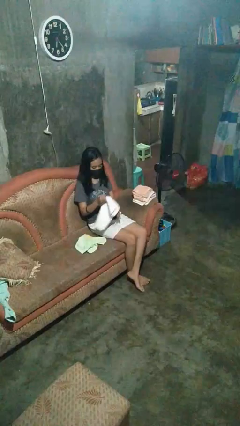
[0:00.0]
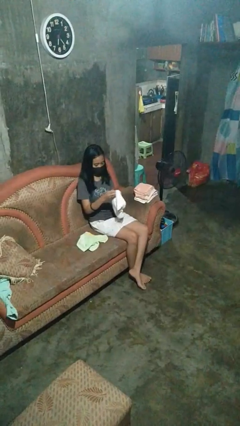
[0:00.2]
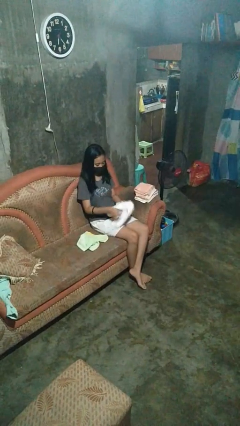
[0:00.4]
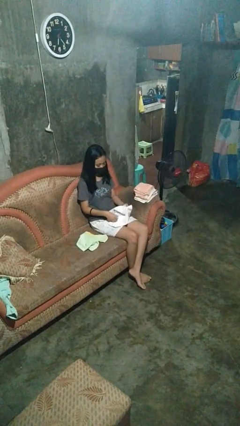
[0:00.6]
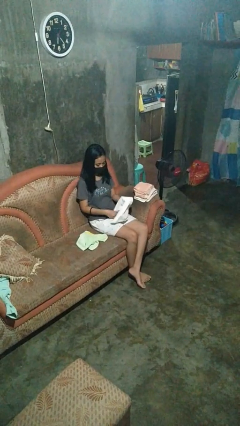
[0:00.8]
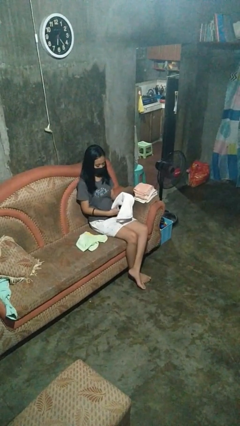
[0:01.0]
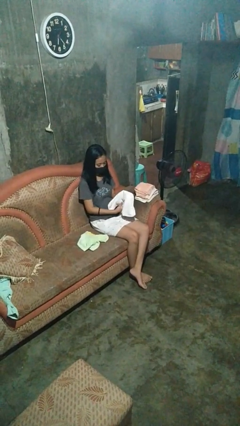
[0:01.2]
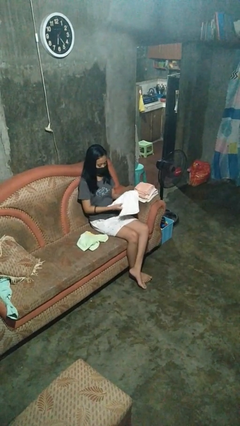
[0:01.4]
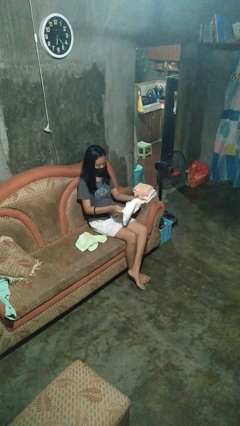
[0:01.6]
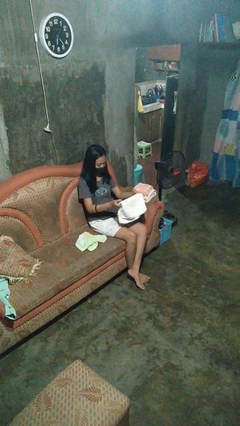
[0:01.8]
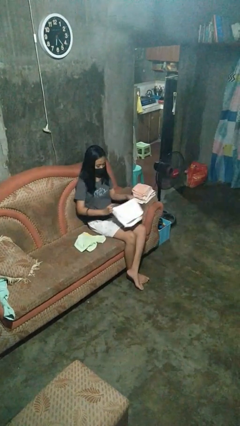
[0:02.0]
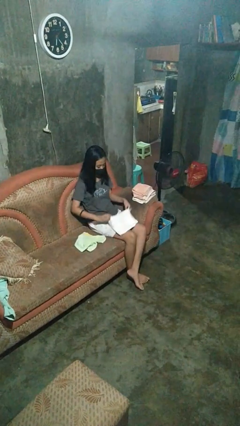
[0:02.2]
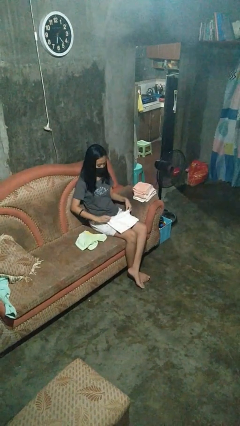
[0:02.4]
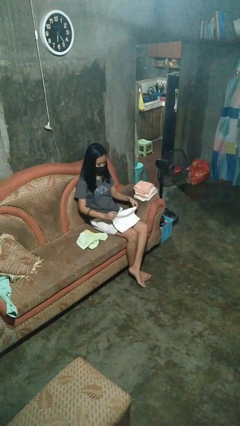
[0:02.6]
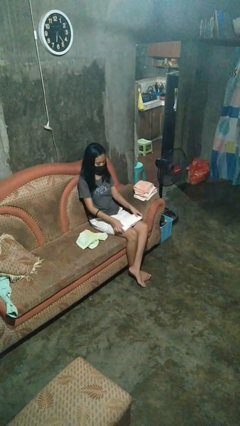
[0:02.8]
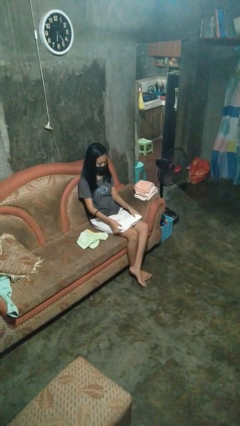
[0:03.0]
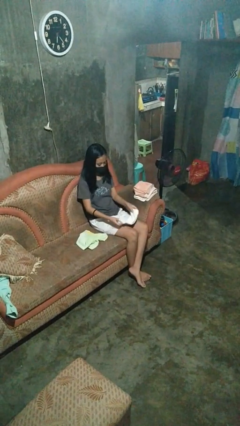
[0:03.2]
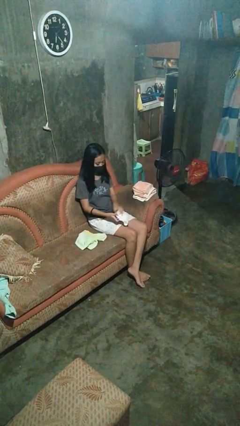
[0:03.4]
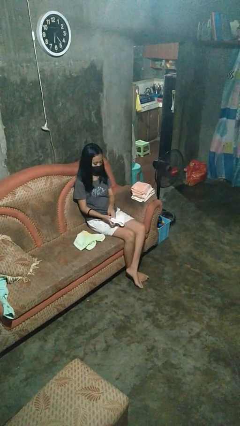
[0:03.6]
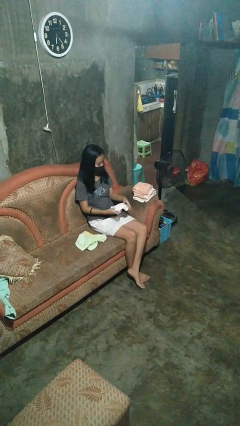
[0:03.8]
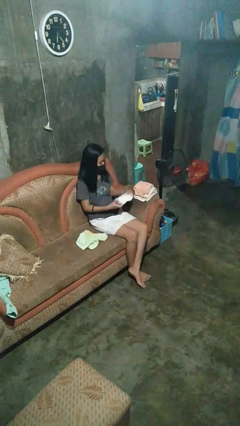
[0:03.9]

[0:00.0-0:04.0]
person folds towel

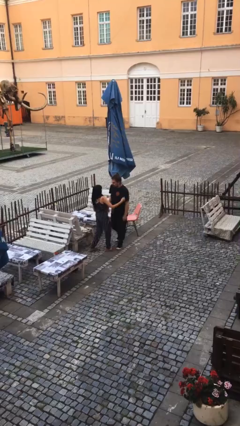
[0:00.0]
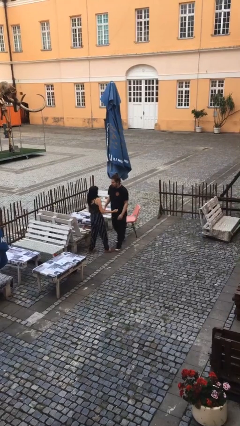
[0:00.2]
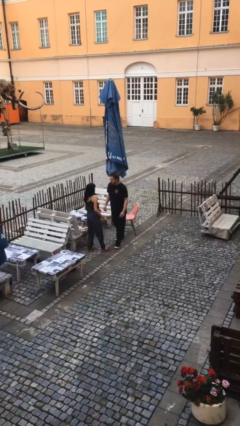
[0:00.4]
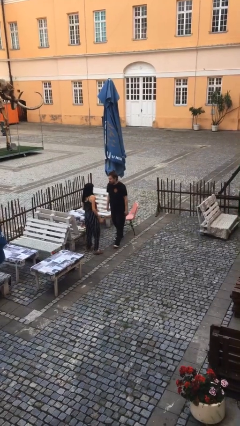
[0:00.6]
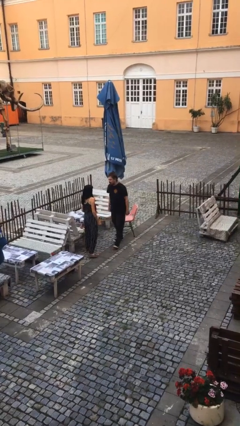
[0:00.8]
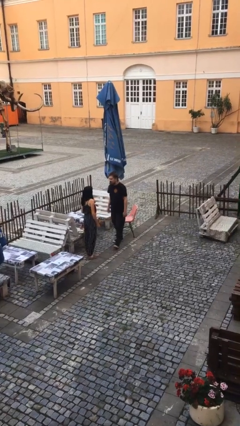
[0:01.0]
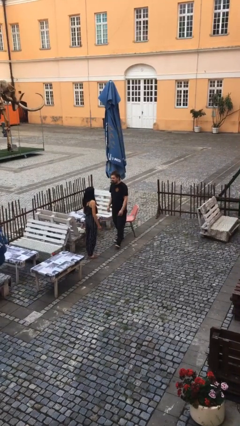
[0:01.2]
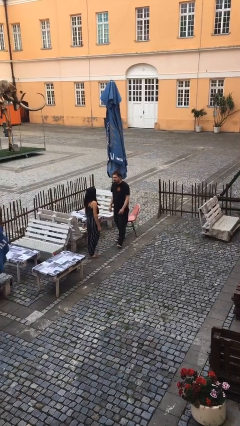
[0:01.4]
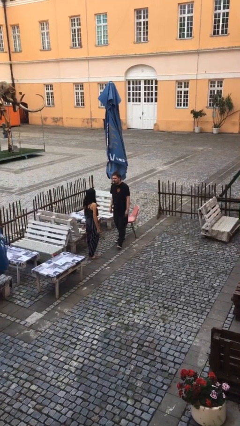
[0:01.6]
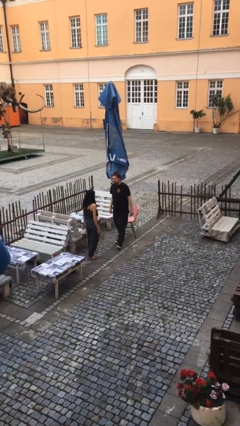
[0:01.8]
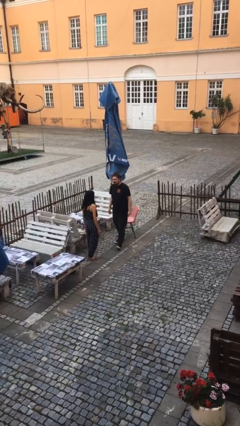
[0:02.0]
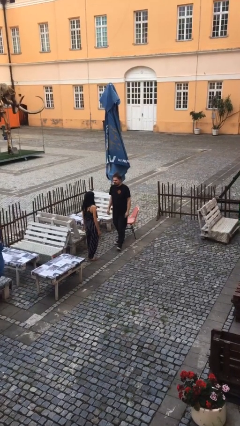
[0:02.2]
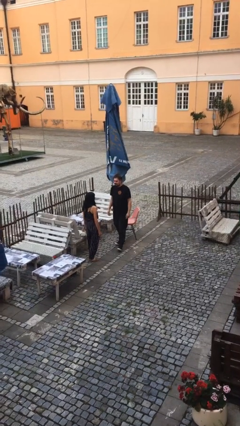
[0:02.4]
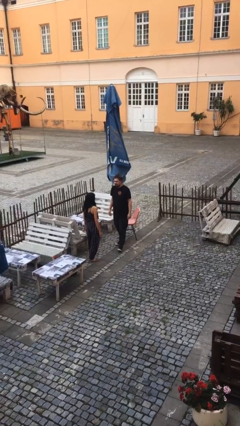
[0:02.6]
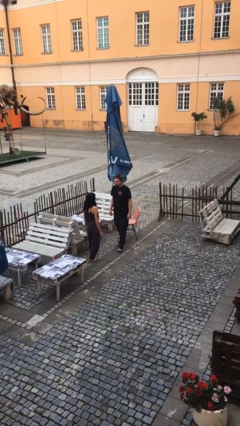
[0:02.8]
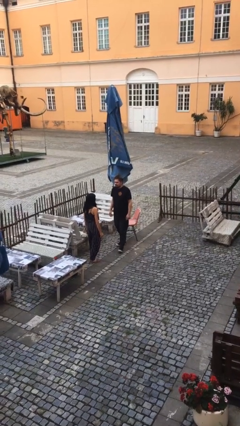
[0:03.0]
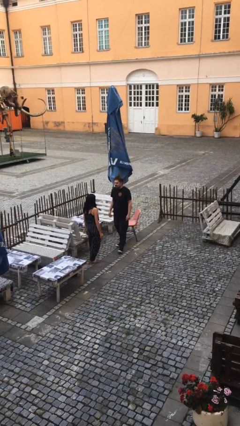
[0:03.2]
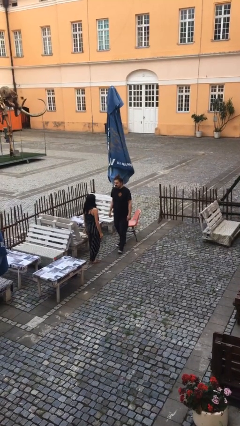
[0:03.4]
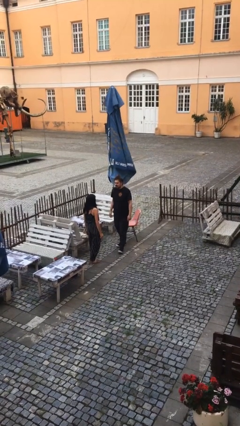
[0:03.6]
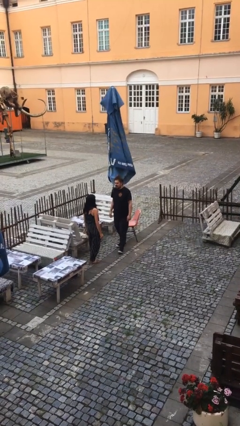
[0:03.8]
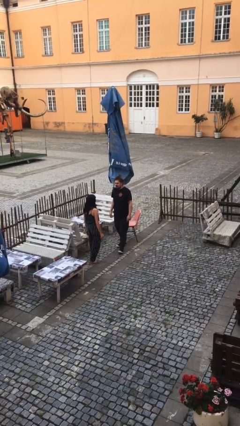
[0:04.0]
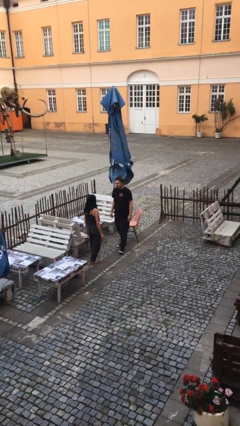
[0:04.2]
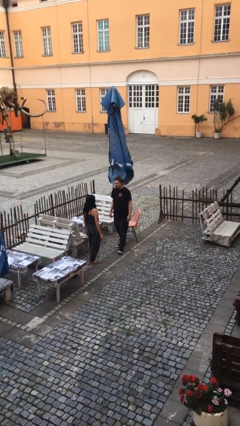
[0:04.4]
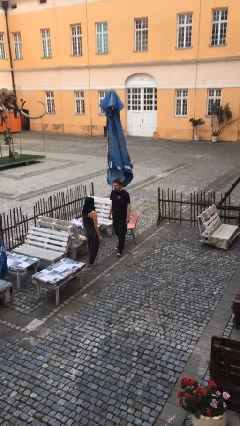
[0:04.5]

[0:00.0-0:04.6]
person talks to person

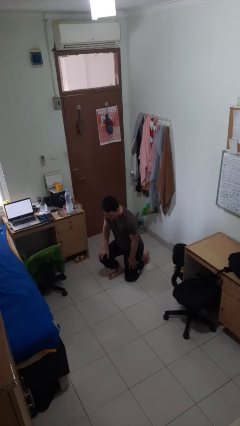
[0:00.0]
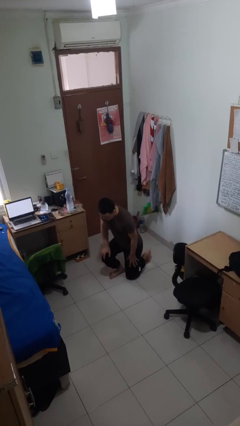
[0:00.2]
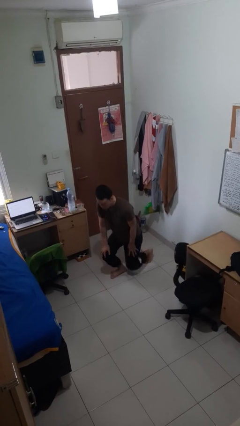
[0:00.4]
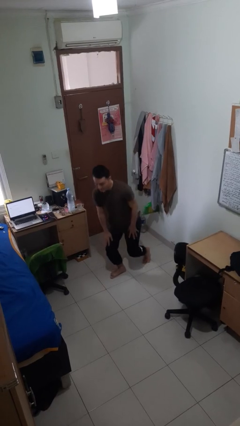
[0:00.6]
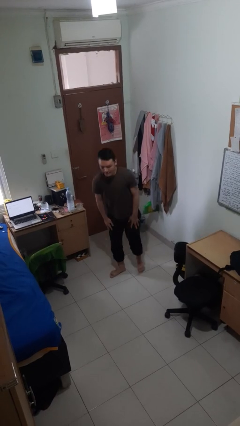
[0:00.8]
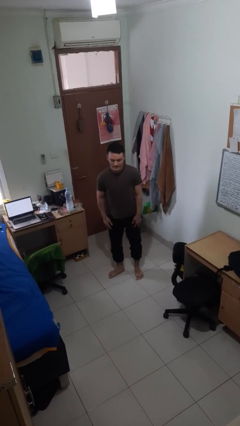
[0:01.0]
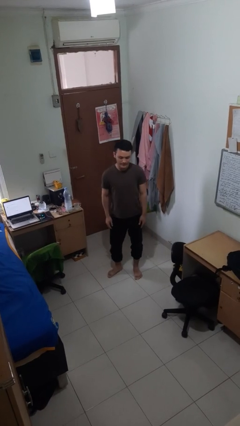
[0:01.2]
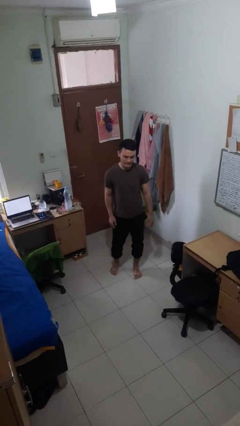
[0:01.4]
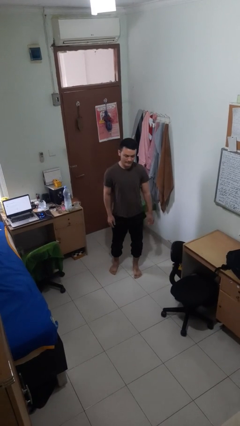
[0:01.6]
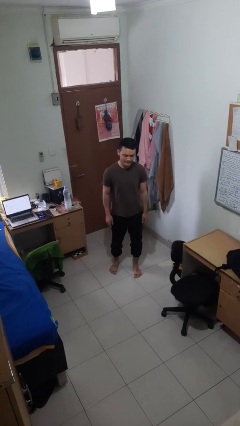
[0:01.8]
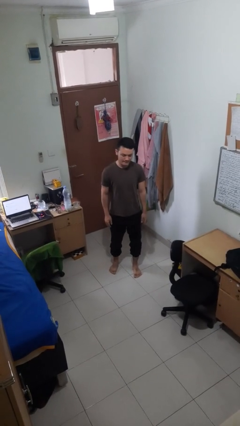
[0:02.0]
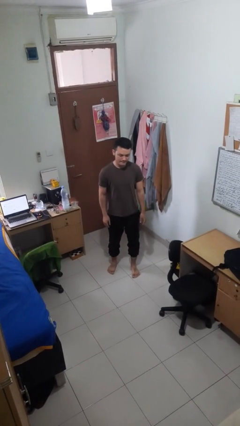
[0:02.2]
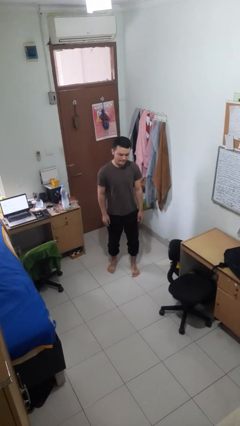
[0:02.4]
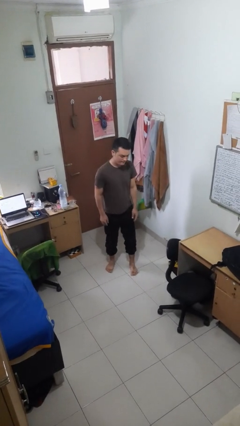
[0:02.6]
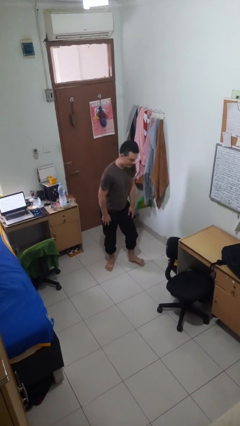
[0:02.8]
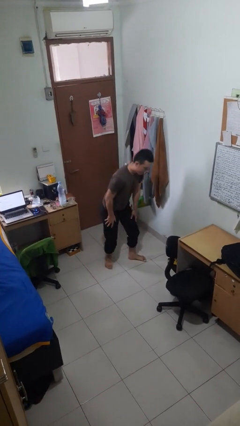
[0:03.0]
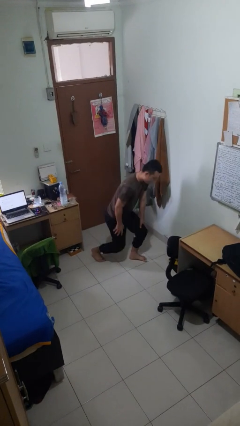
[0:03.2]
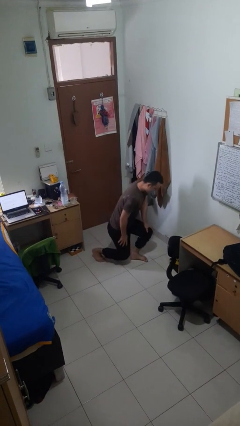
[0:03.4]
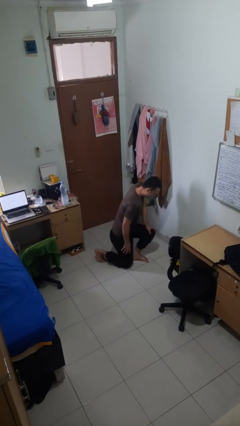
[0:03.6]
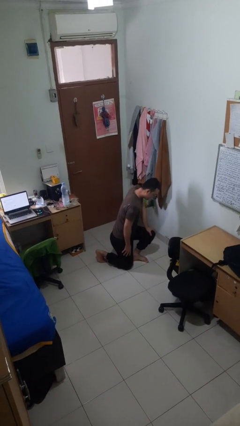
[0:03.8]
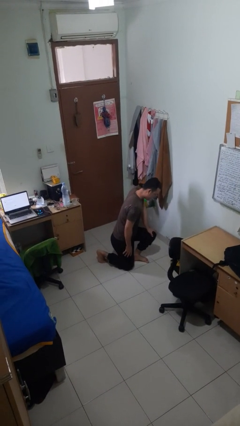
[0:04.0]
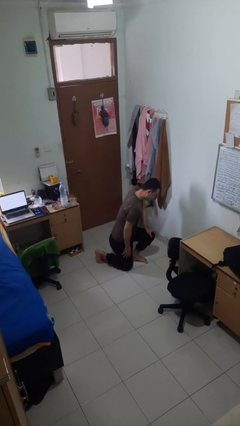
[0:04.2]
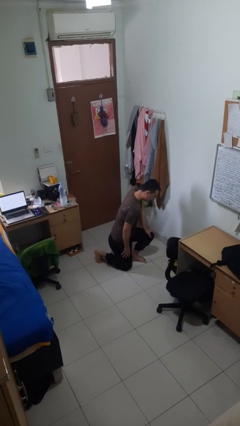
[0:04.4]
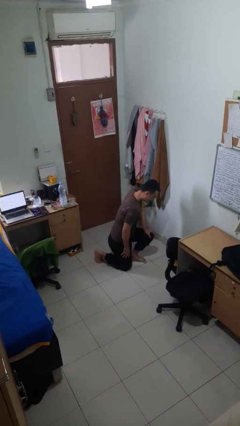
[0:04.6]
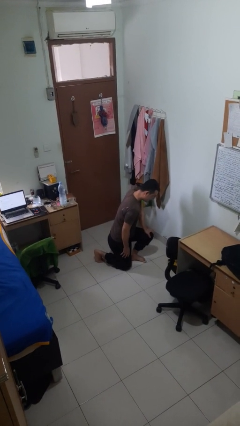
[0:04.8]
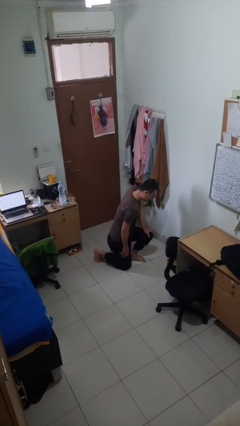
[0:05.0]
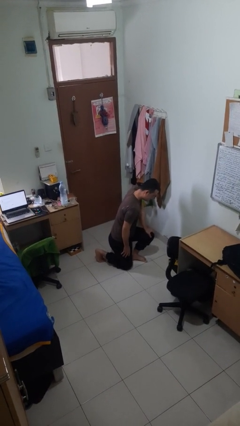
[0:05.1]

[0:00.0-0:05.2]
person stands up from floor

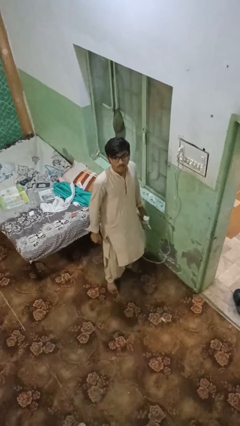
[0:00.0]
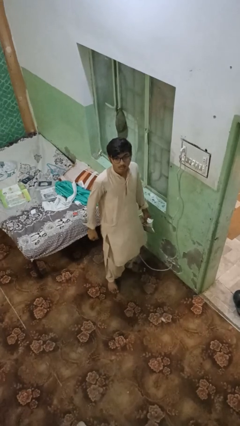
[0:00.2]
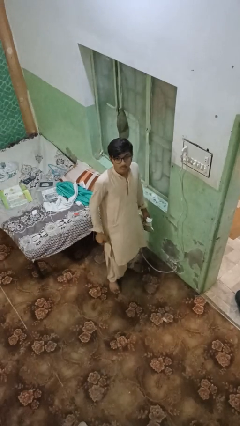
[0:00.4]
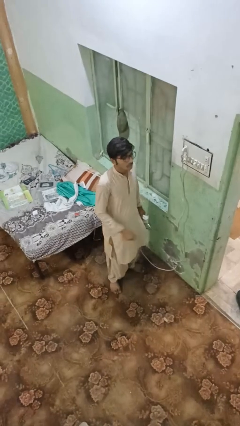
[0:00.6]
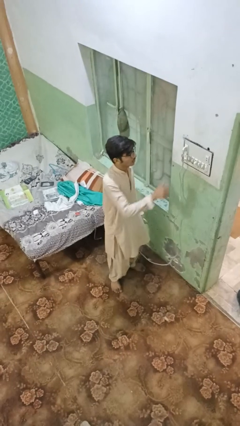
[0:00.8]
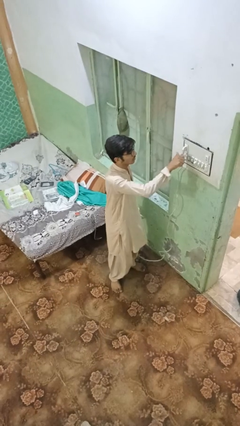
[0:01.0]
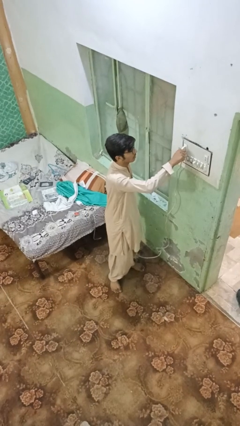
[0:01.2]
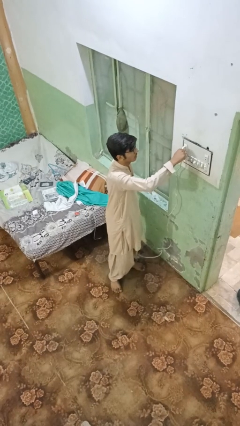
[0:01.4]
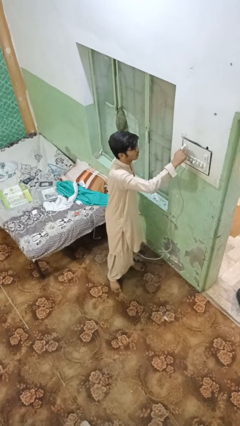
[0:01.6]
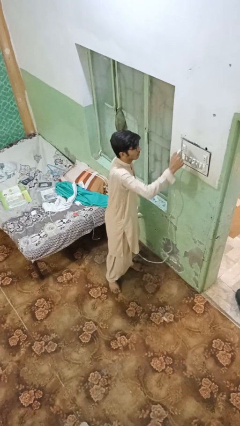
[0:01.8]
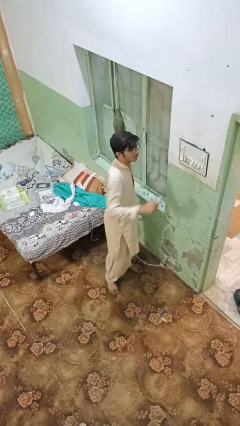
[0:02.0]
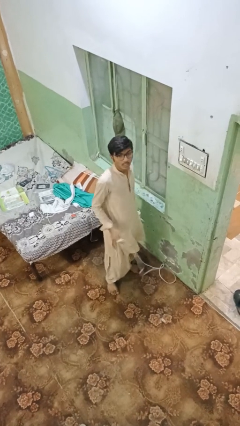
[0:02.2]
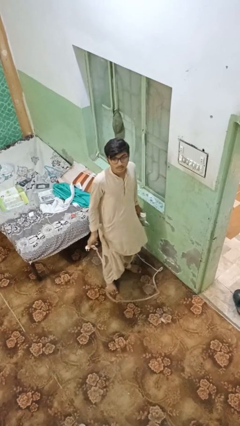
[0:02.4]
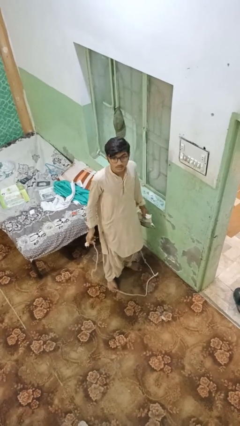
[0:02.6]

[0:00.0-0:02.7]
person unplugs from electrical socket

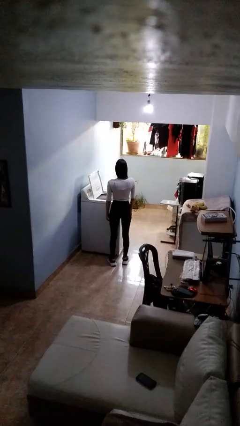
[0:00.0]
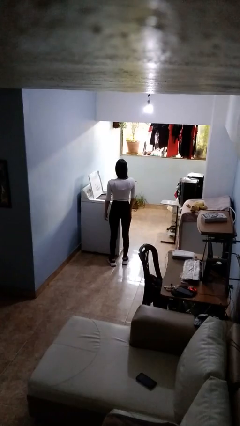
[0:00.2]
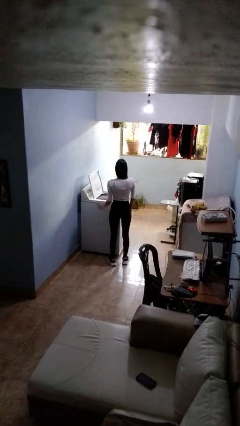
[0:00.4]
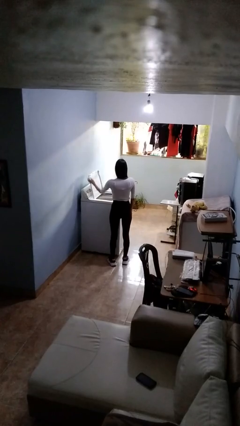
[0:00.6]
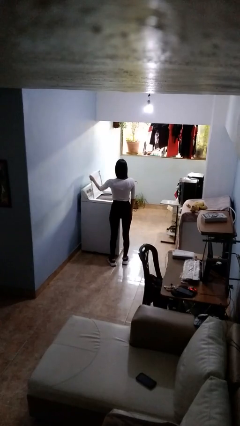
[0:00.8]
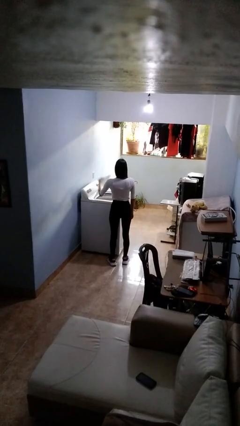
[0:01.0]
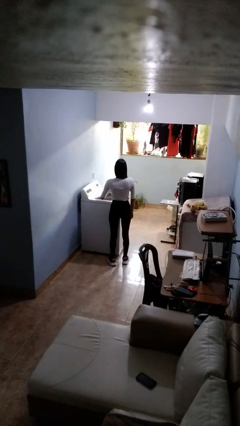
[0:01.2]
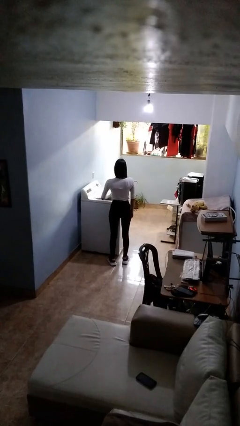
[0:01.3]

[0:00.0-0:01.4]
person closes clothes washer
